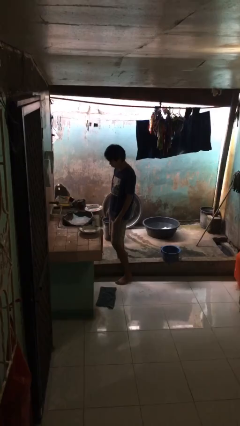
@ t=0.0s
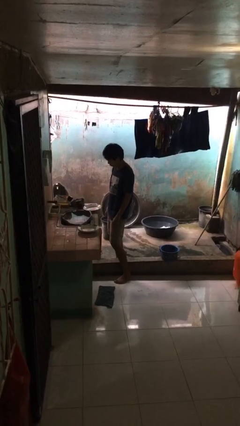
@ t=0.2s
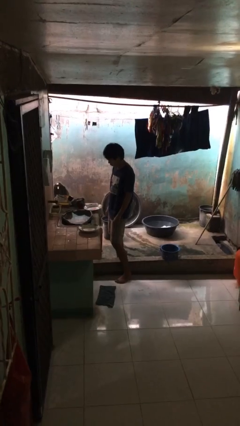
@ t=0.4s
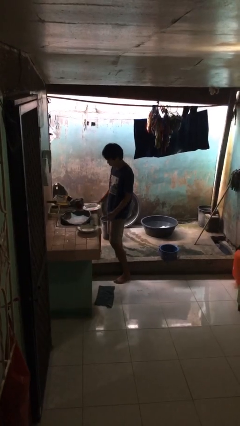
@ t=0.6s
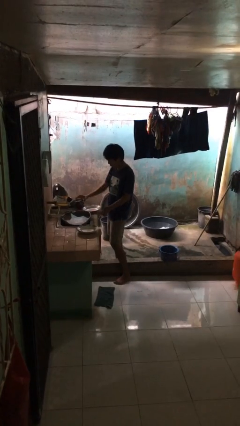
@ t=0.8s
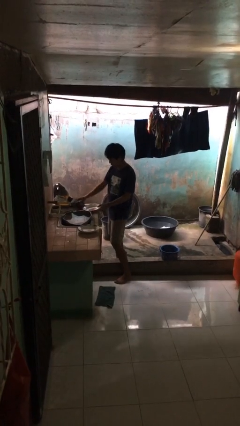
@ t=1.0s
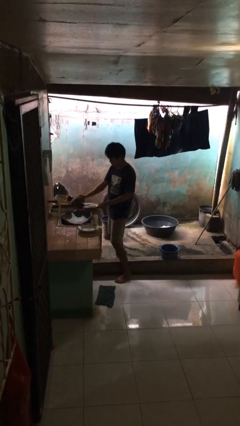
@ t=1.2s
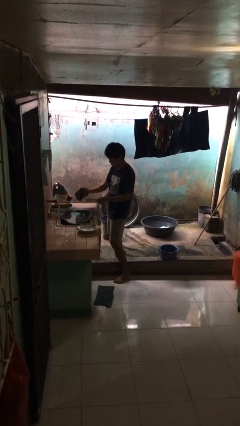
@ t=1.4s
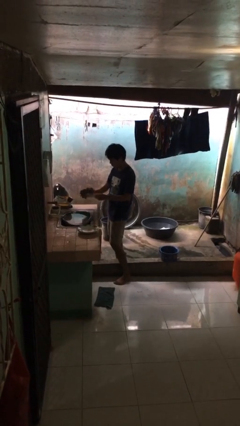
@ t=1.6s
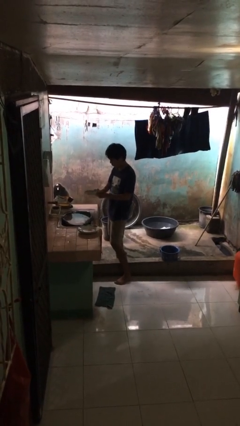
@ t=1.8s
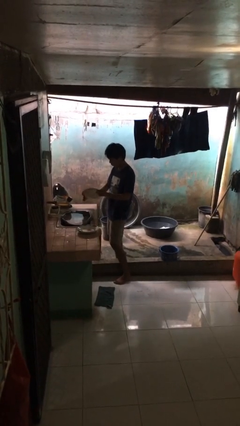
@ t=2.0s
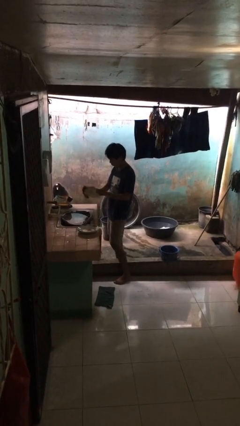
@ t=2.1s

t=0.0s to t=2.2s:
person dries dish

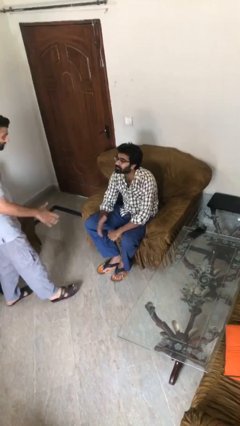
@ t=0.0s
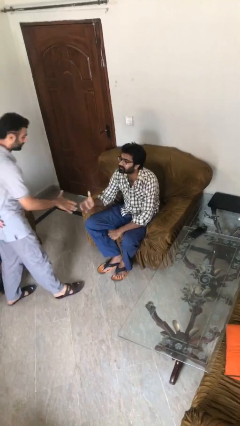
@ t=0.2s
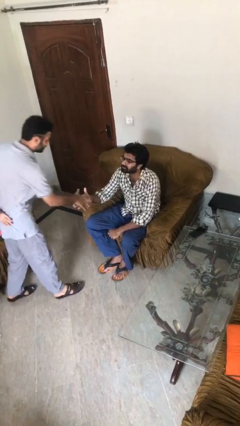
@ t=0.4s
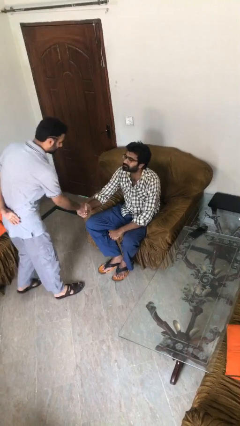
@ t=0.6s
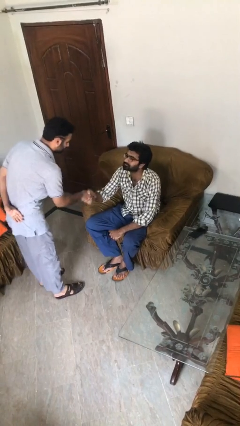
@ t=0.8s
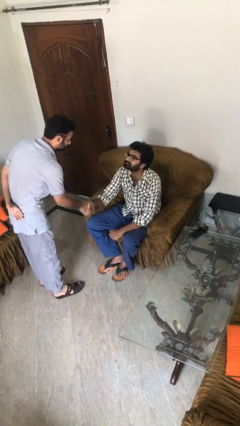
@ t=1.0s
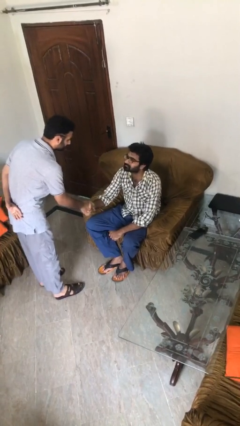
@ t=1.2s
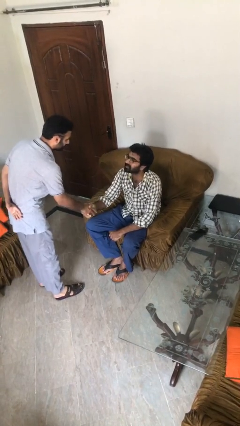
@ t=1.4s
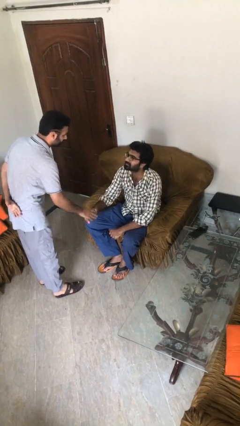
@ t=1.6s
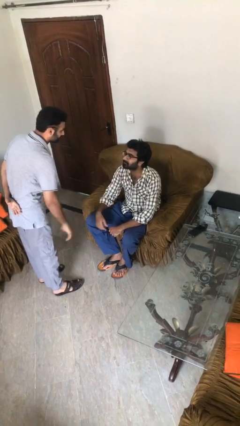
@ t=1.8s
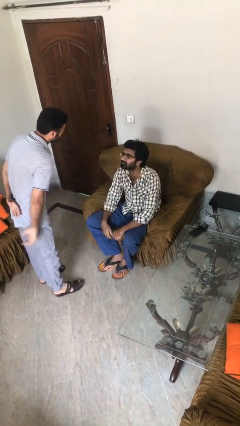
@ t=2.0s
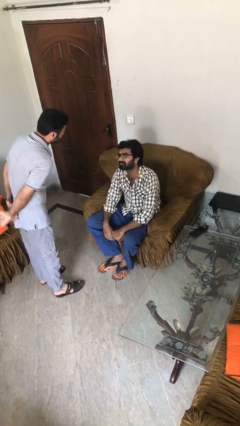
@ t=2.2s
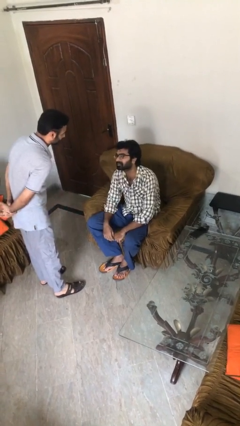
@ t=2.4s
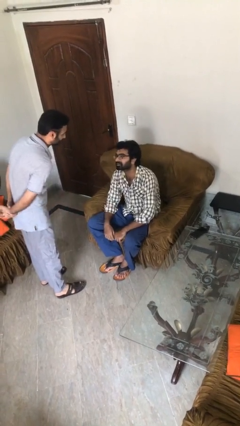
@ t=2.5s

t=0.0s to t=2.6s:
person shakes hand

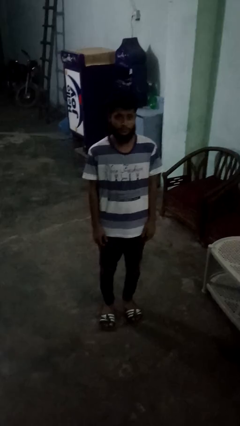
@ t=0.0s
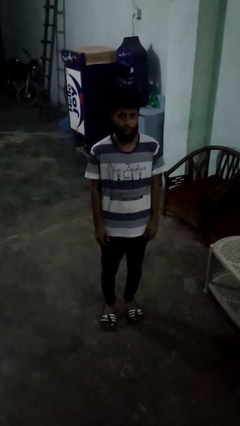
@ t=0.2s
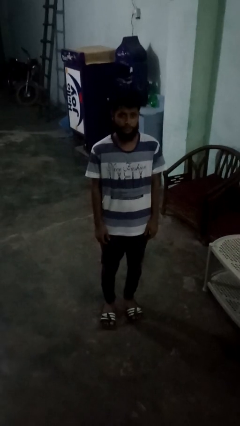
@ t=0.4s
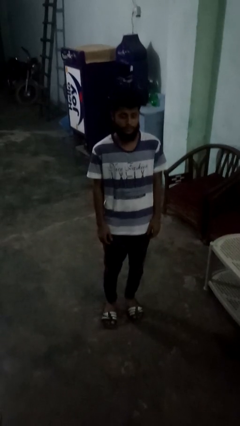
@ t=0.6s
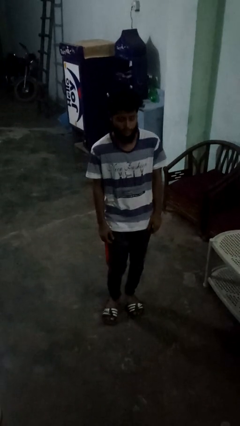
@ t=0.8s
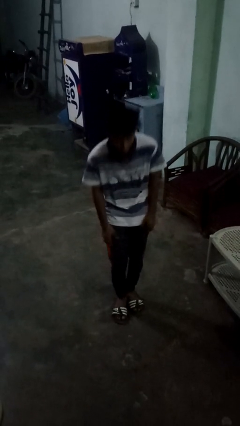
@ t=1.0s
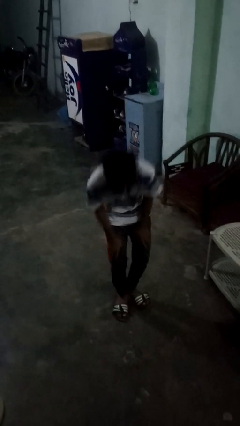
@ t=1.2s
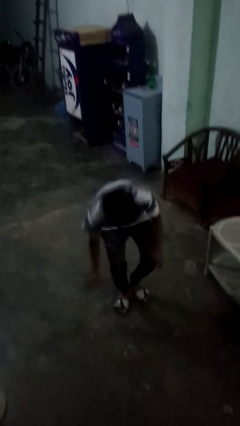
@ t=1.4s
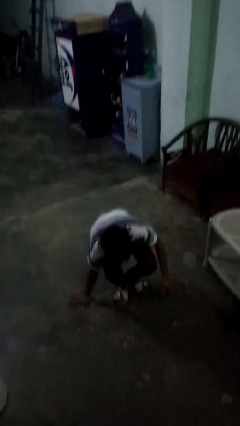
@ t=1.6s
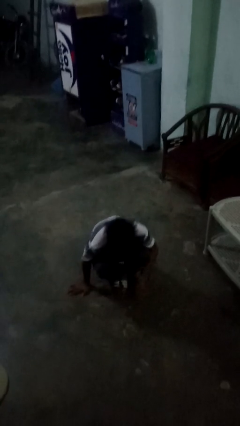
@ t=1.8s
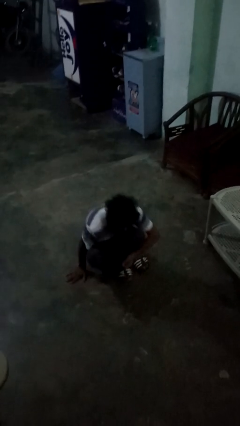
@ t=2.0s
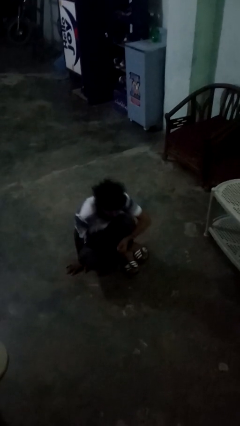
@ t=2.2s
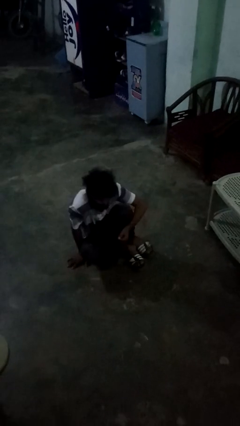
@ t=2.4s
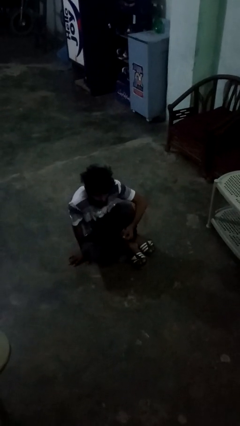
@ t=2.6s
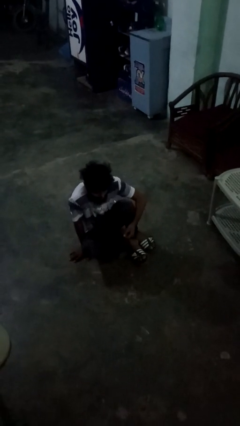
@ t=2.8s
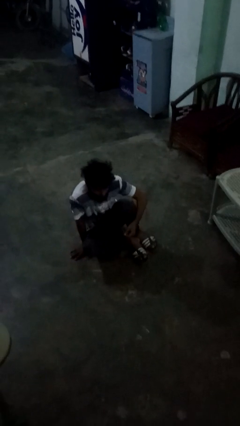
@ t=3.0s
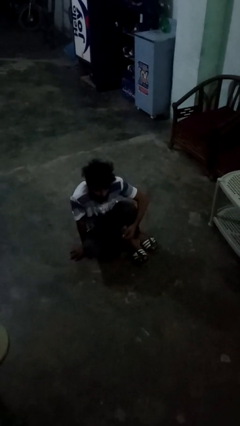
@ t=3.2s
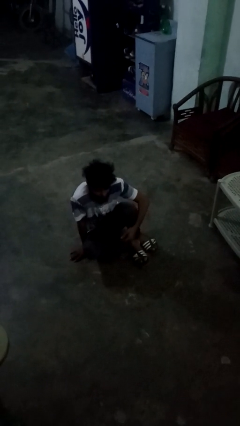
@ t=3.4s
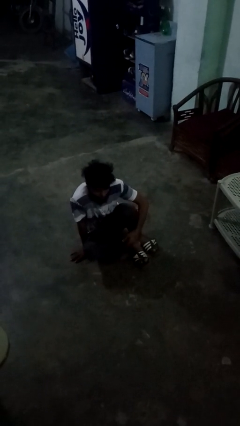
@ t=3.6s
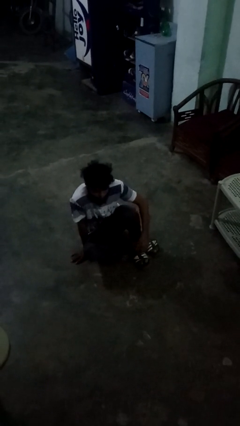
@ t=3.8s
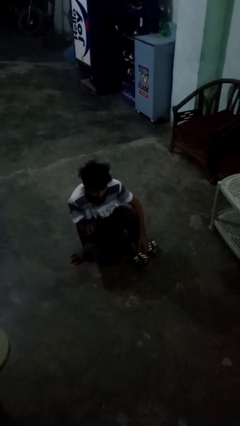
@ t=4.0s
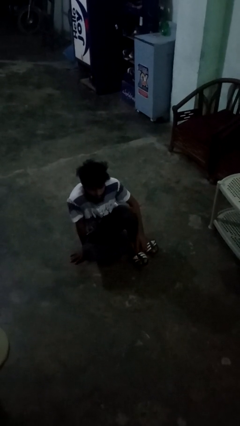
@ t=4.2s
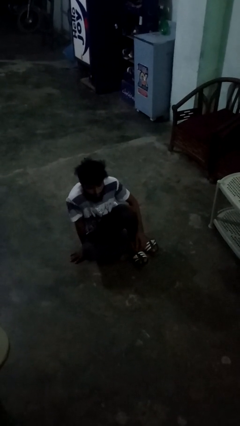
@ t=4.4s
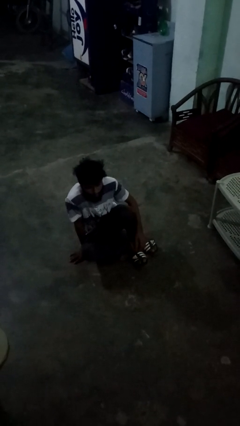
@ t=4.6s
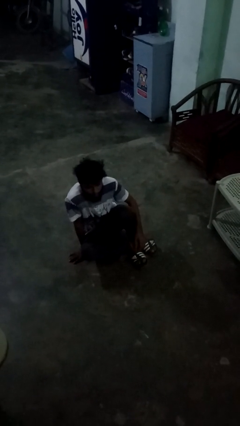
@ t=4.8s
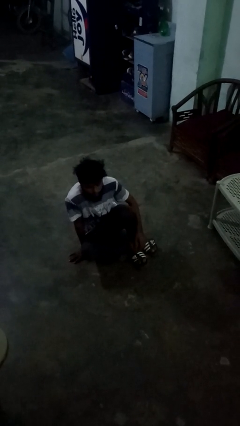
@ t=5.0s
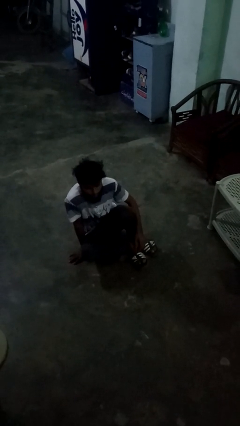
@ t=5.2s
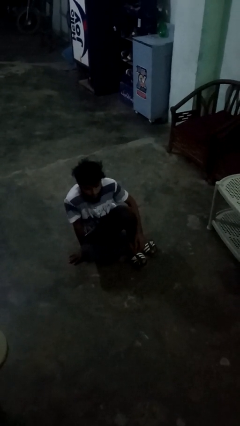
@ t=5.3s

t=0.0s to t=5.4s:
person falls while standing

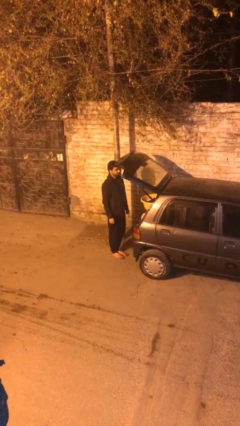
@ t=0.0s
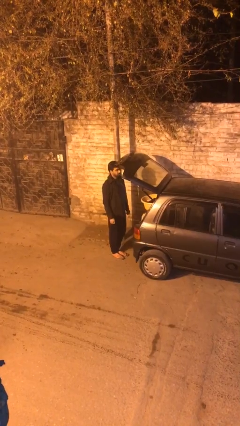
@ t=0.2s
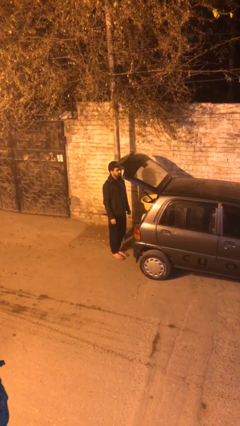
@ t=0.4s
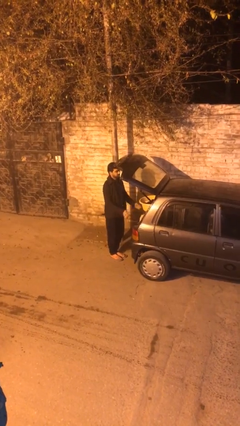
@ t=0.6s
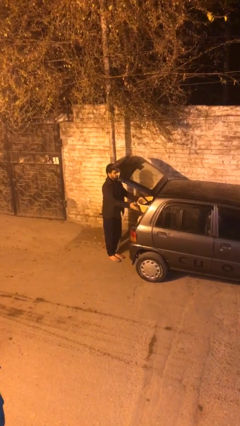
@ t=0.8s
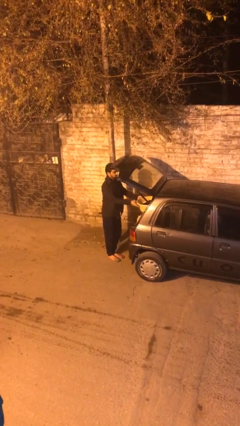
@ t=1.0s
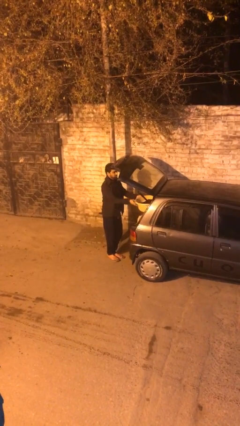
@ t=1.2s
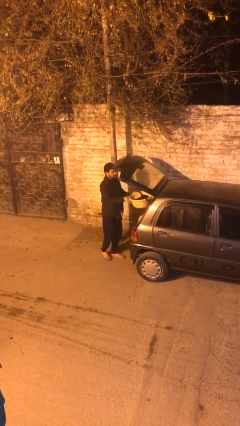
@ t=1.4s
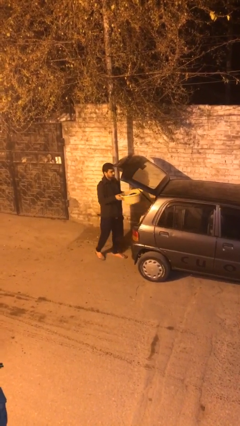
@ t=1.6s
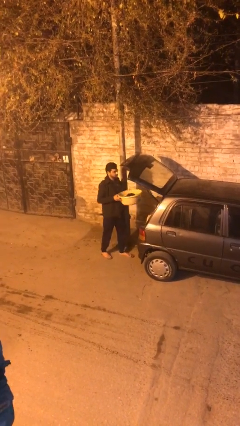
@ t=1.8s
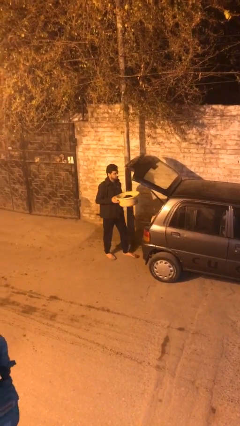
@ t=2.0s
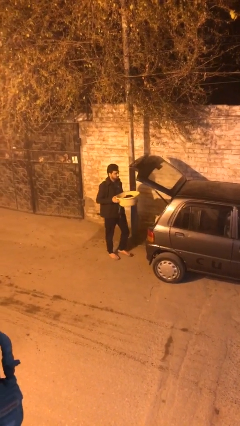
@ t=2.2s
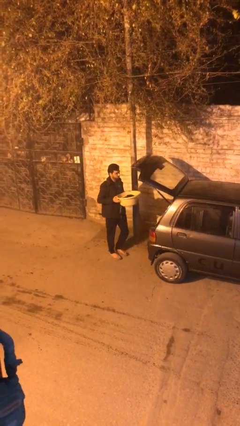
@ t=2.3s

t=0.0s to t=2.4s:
person unloads car

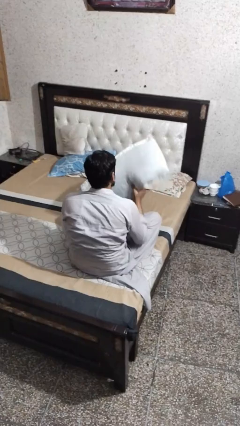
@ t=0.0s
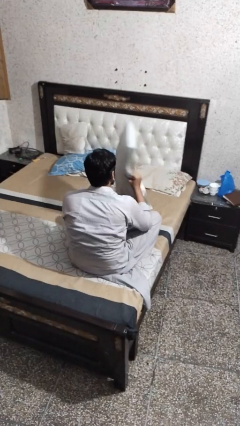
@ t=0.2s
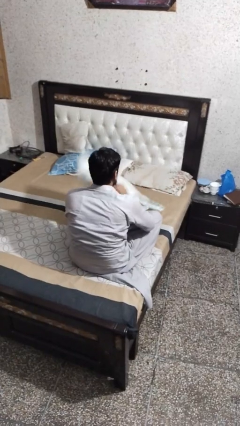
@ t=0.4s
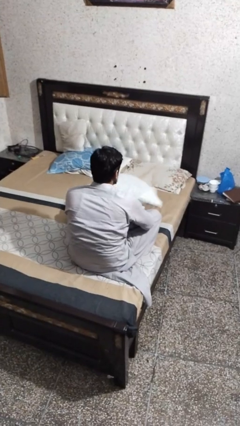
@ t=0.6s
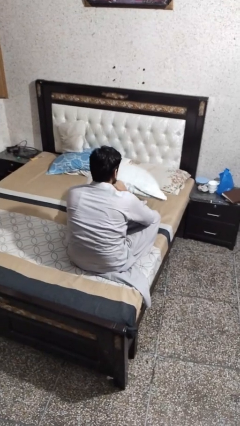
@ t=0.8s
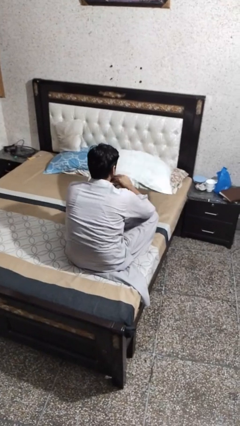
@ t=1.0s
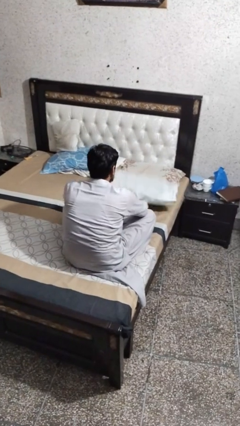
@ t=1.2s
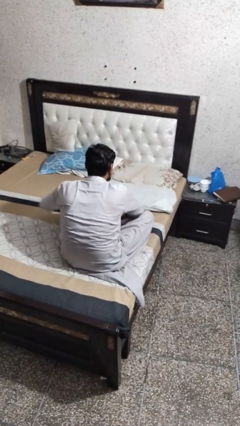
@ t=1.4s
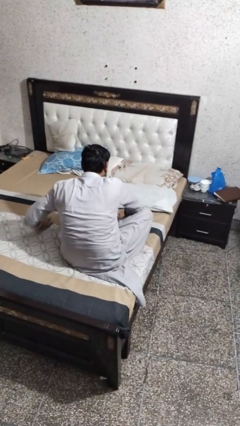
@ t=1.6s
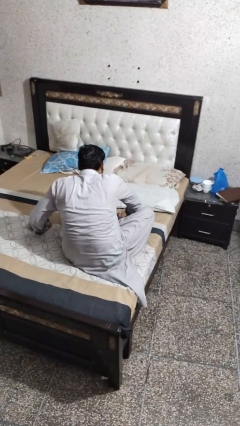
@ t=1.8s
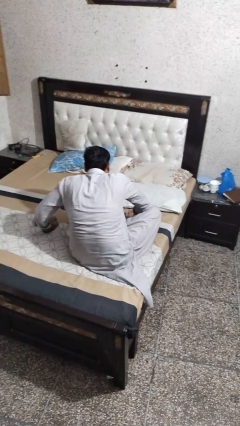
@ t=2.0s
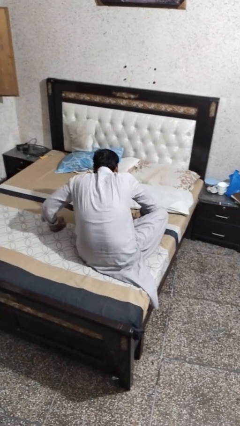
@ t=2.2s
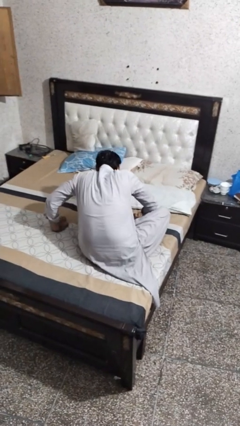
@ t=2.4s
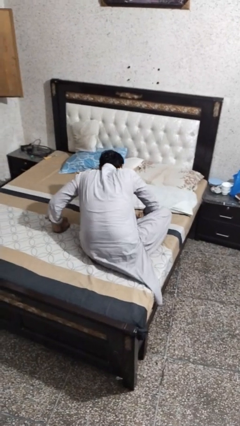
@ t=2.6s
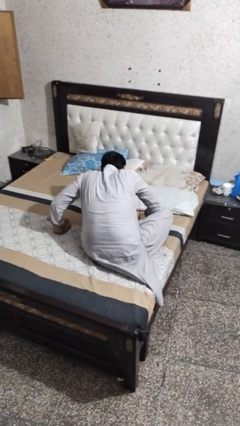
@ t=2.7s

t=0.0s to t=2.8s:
person puts down object on bed

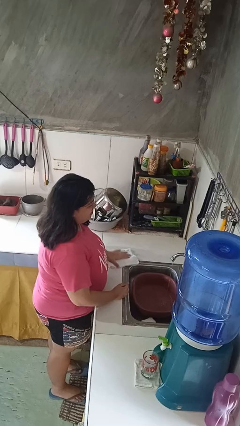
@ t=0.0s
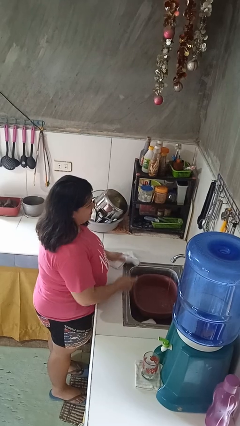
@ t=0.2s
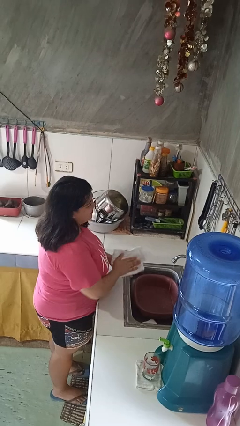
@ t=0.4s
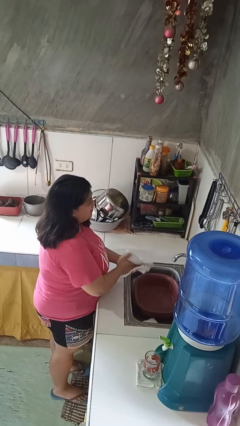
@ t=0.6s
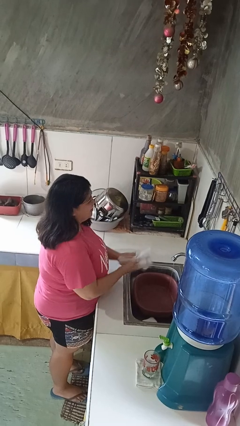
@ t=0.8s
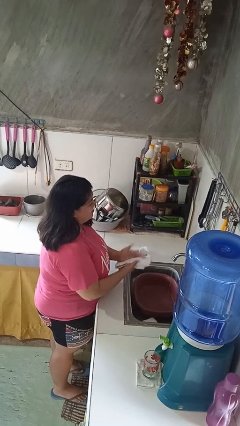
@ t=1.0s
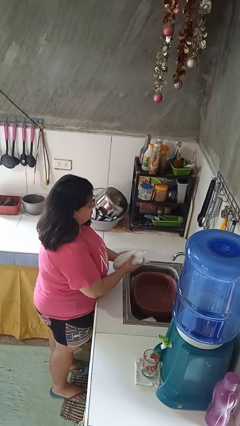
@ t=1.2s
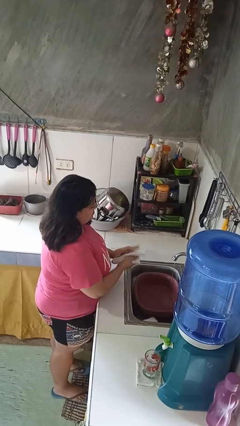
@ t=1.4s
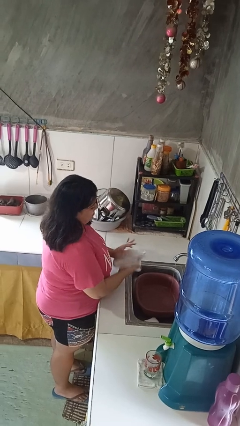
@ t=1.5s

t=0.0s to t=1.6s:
person dries hands with towel

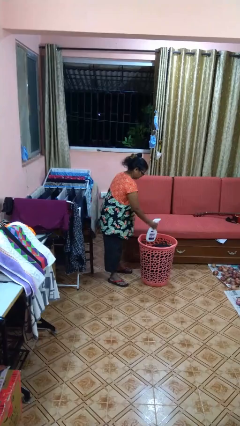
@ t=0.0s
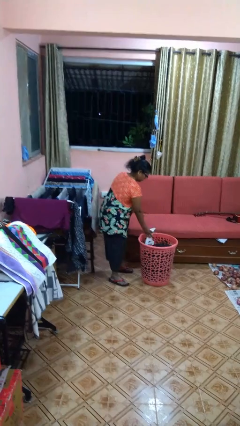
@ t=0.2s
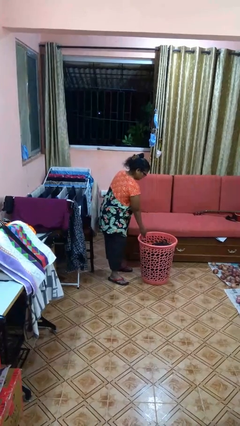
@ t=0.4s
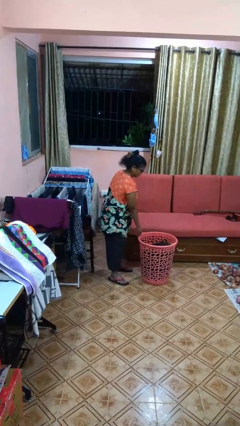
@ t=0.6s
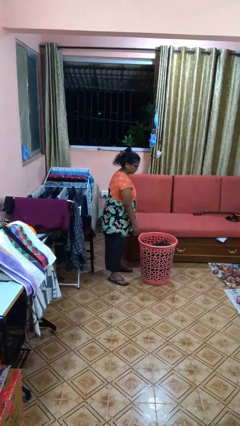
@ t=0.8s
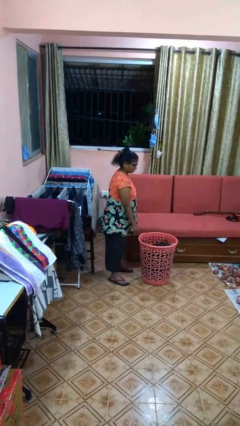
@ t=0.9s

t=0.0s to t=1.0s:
person puts object into basket
